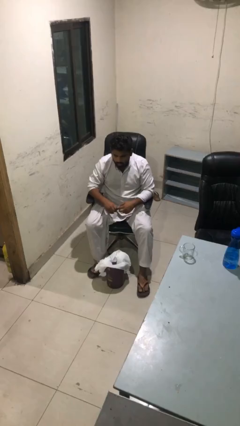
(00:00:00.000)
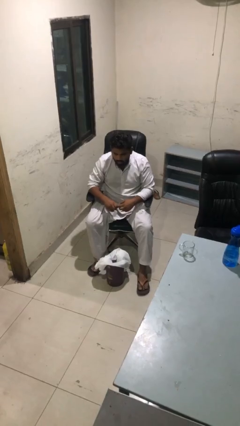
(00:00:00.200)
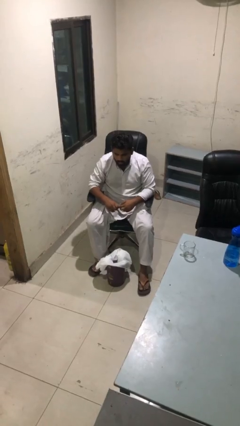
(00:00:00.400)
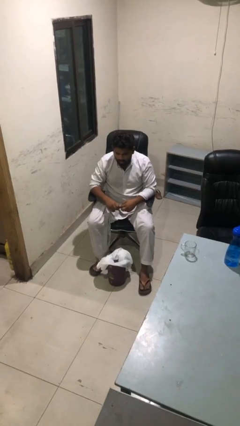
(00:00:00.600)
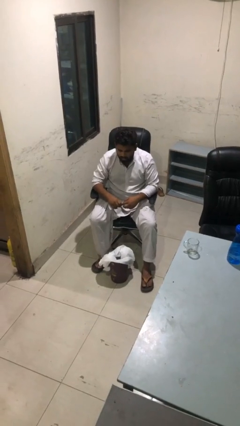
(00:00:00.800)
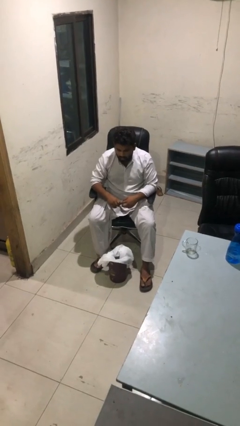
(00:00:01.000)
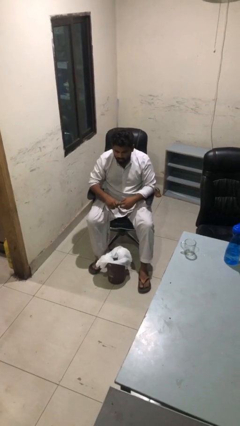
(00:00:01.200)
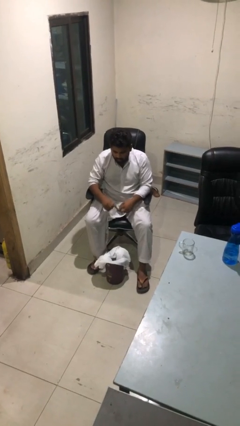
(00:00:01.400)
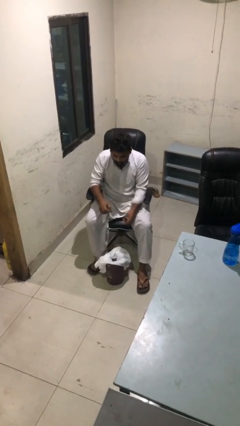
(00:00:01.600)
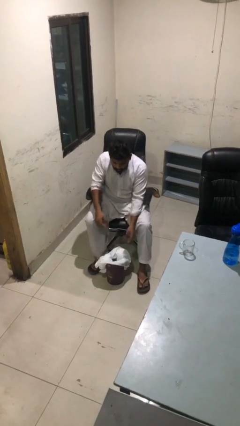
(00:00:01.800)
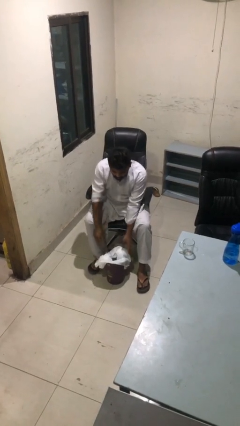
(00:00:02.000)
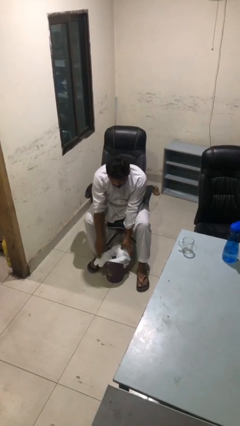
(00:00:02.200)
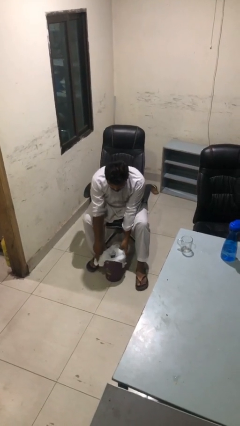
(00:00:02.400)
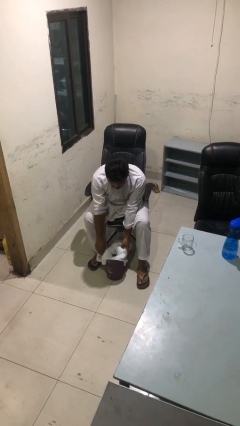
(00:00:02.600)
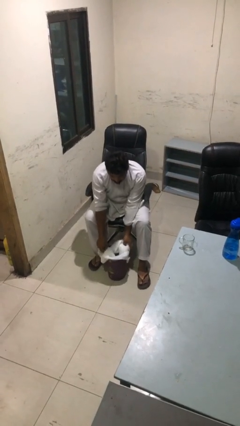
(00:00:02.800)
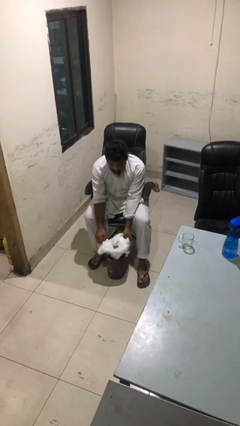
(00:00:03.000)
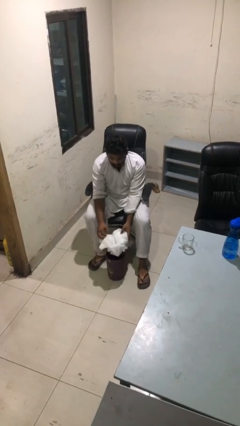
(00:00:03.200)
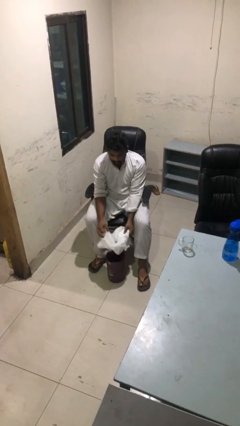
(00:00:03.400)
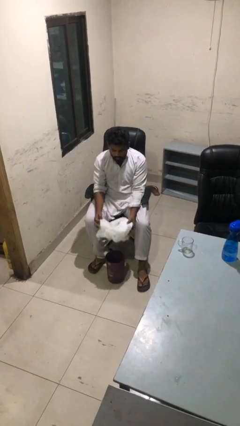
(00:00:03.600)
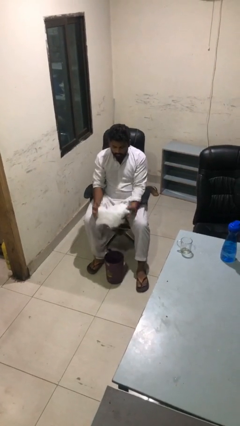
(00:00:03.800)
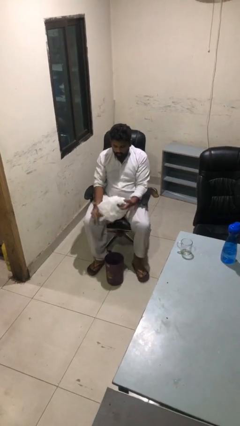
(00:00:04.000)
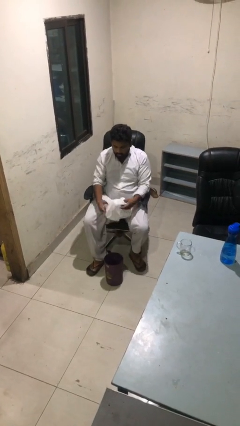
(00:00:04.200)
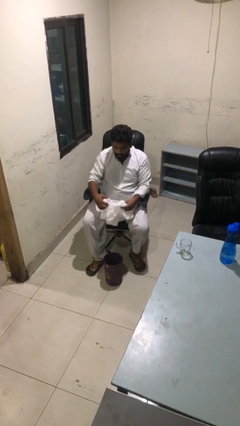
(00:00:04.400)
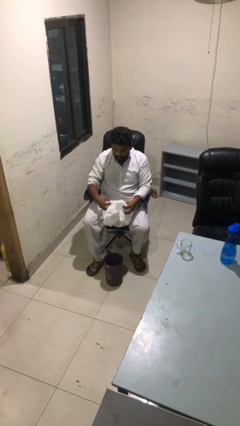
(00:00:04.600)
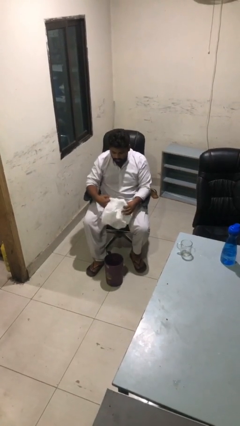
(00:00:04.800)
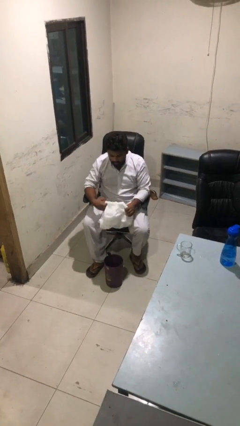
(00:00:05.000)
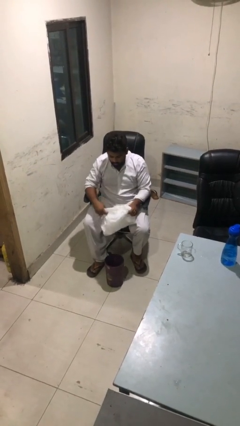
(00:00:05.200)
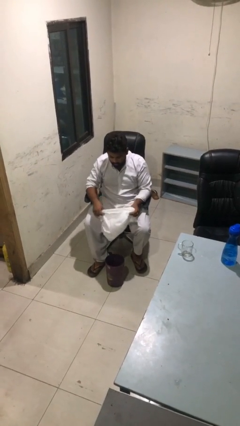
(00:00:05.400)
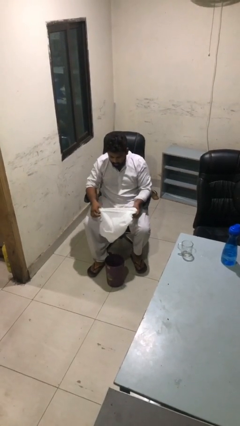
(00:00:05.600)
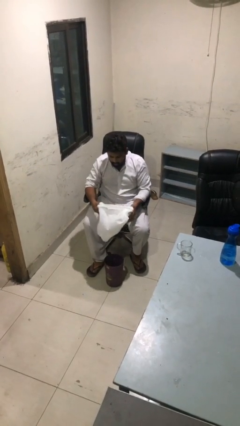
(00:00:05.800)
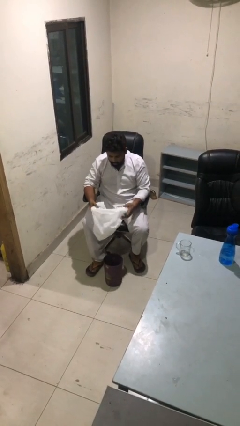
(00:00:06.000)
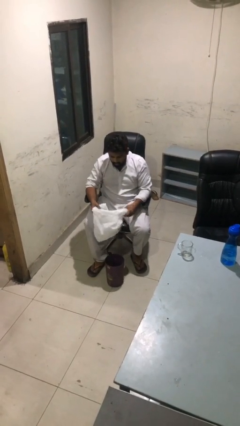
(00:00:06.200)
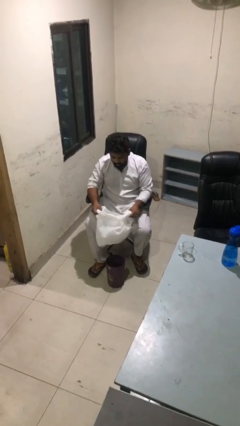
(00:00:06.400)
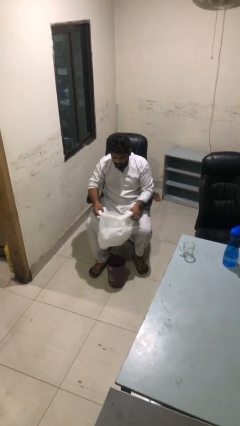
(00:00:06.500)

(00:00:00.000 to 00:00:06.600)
person removes trashbag from trashcan

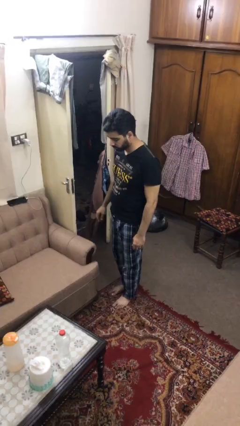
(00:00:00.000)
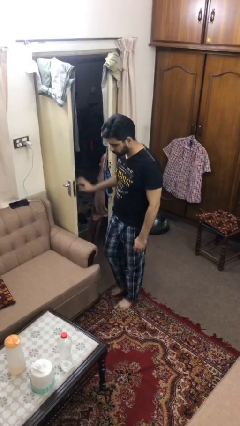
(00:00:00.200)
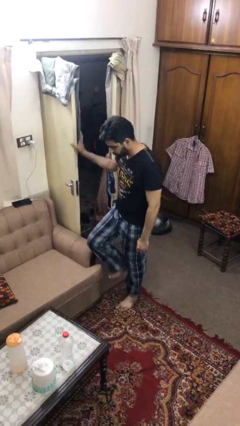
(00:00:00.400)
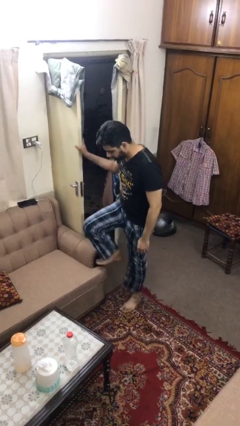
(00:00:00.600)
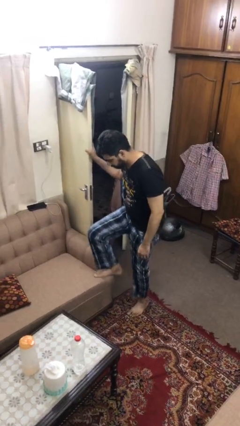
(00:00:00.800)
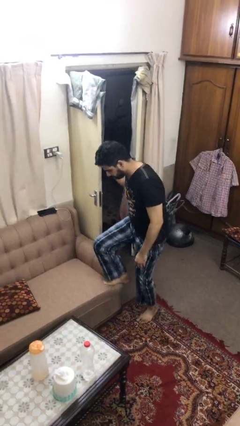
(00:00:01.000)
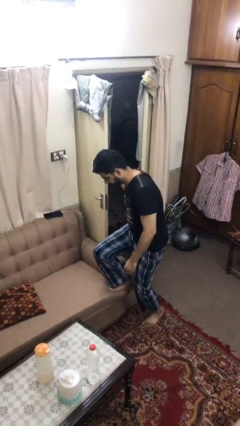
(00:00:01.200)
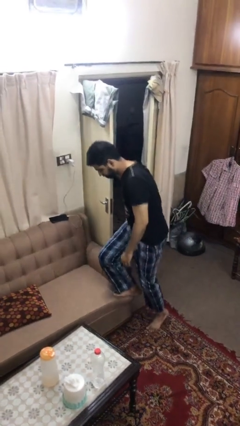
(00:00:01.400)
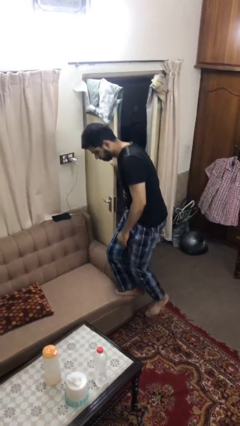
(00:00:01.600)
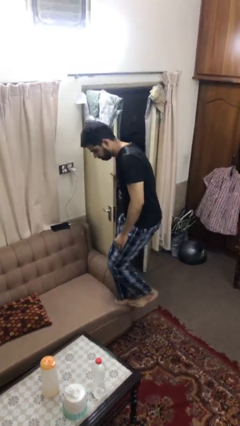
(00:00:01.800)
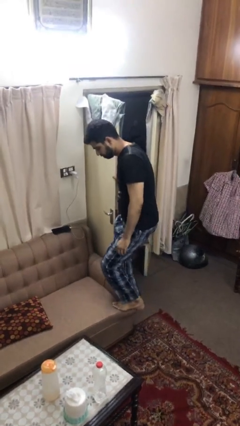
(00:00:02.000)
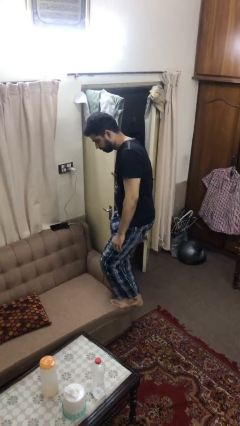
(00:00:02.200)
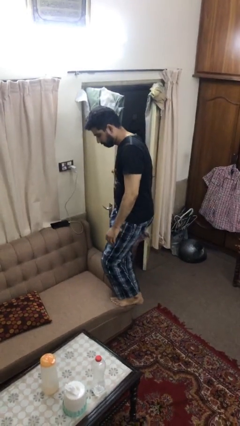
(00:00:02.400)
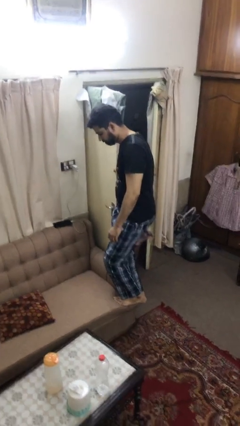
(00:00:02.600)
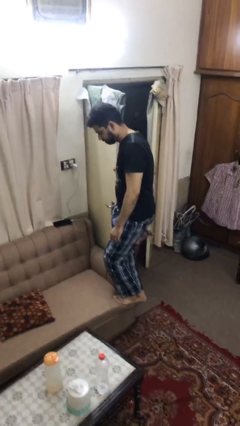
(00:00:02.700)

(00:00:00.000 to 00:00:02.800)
person climbs on couch

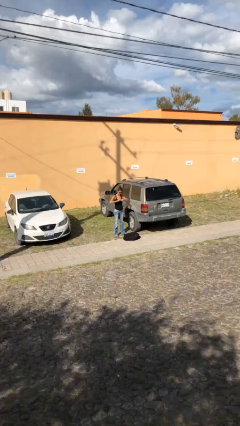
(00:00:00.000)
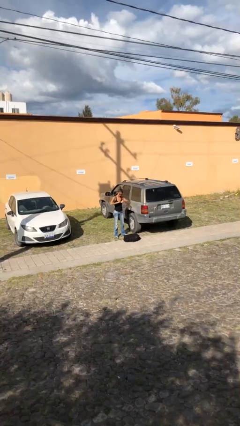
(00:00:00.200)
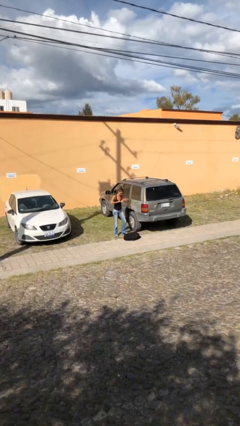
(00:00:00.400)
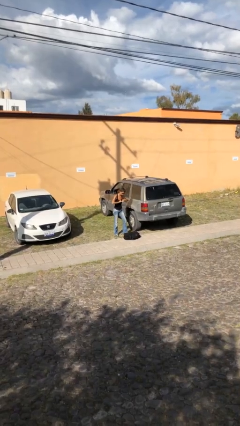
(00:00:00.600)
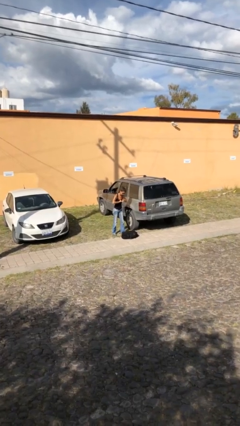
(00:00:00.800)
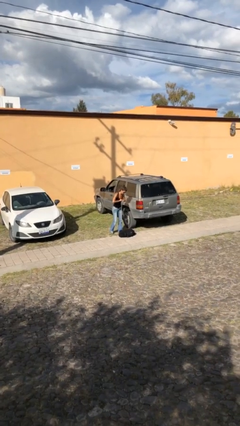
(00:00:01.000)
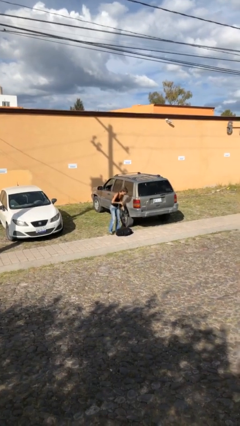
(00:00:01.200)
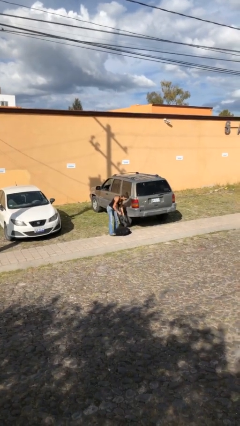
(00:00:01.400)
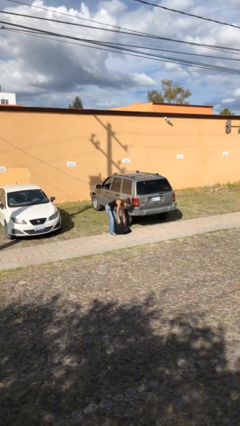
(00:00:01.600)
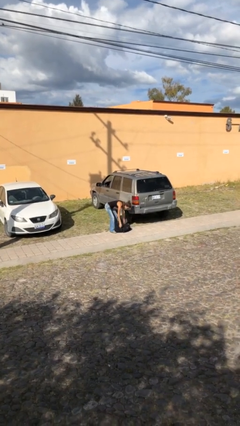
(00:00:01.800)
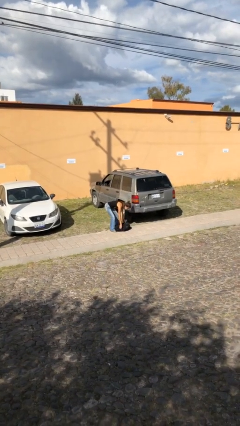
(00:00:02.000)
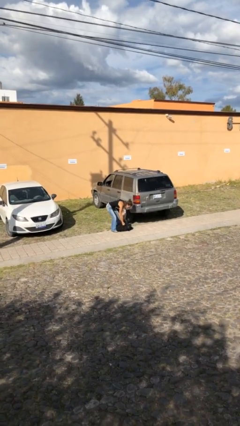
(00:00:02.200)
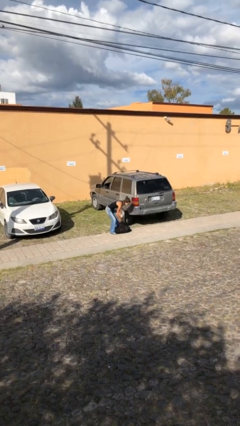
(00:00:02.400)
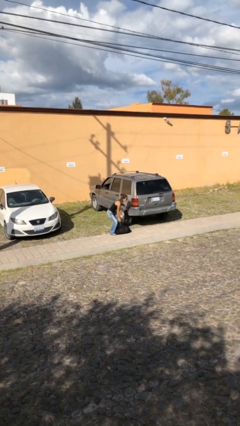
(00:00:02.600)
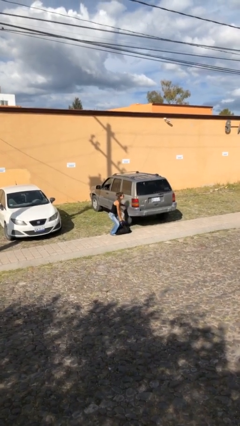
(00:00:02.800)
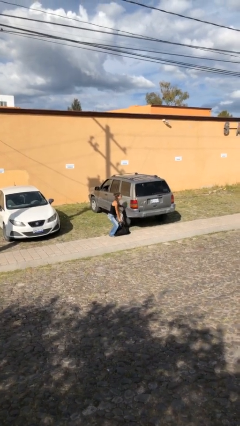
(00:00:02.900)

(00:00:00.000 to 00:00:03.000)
person picks up object from floor

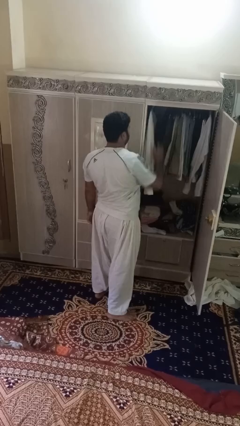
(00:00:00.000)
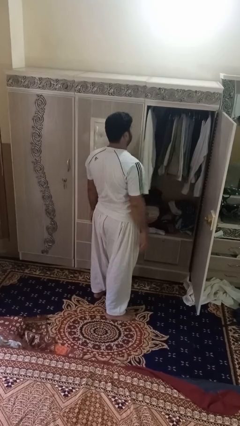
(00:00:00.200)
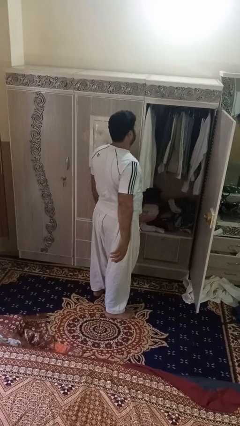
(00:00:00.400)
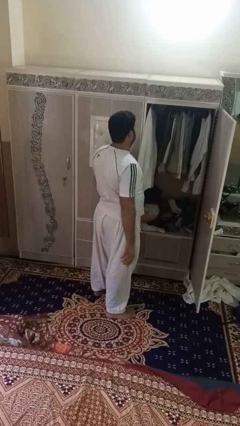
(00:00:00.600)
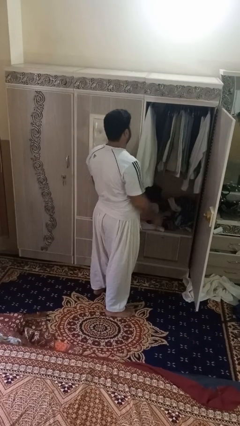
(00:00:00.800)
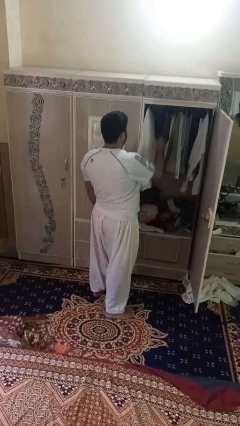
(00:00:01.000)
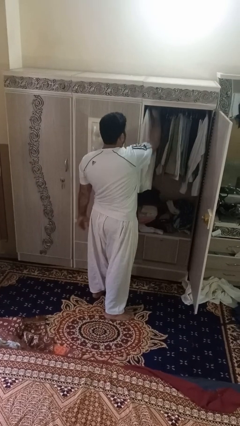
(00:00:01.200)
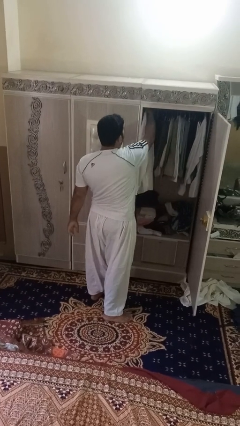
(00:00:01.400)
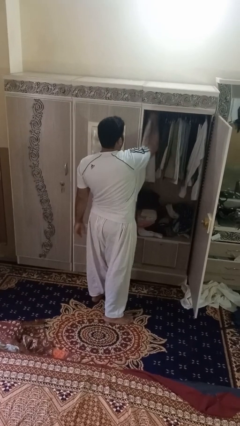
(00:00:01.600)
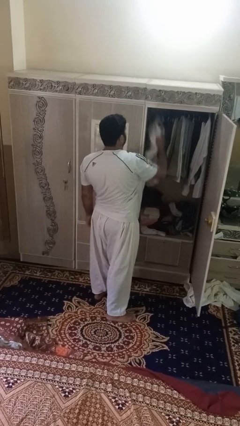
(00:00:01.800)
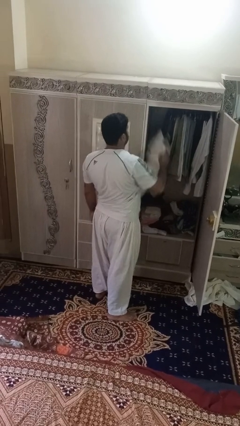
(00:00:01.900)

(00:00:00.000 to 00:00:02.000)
person takes clothes from closet

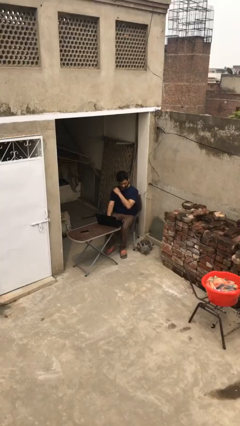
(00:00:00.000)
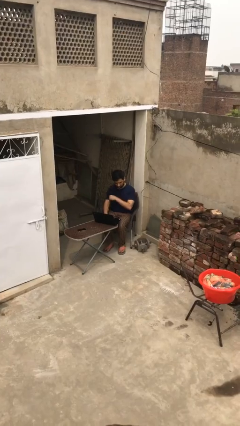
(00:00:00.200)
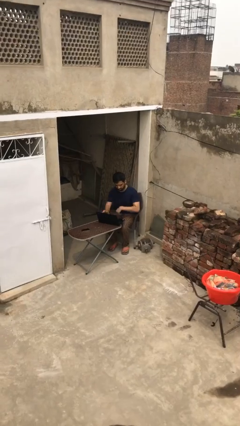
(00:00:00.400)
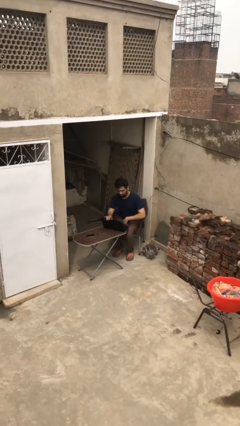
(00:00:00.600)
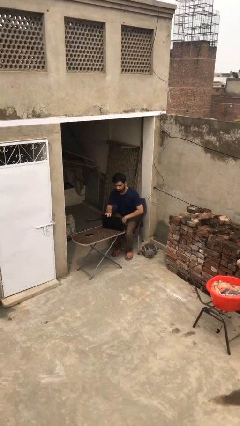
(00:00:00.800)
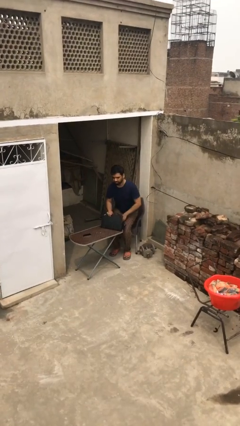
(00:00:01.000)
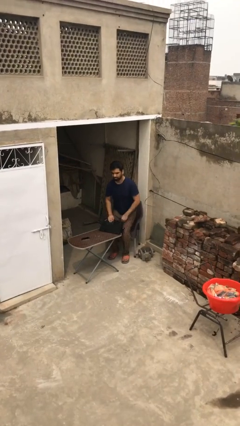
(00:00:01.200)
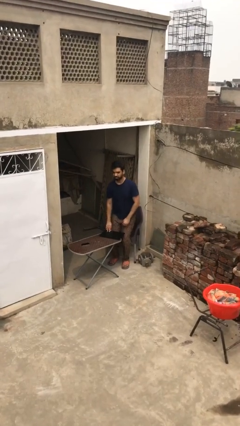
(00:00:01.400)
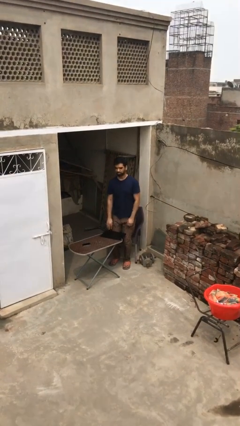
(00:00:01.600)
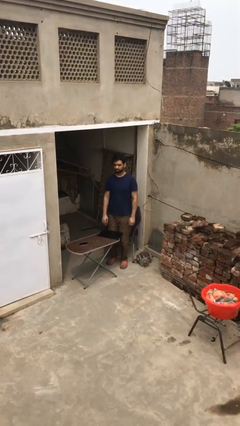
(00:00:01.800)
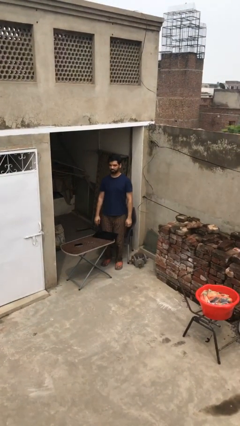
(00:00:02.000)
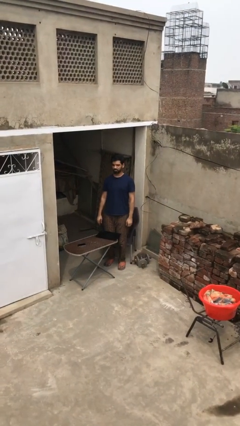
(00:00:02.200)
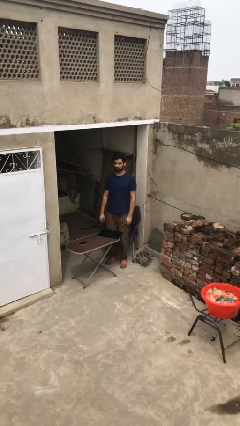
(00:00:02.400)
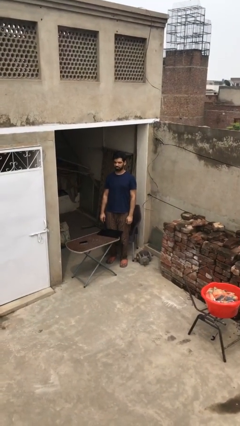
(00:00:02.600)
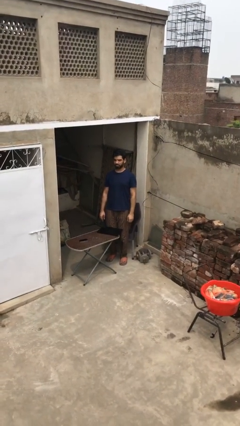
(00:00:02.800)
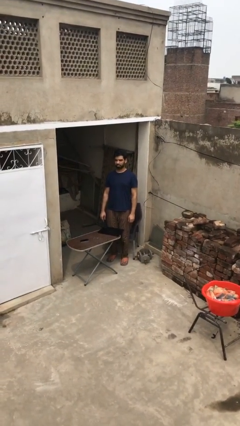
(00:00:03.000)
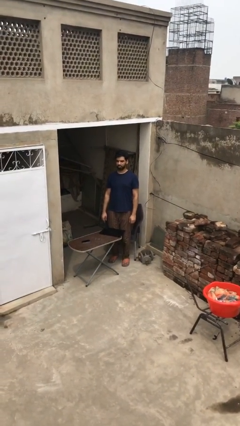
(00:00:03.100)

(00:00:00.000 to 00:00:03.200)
person stands up
